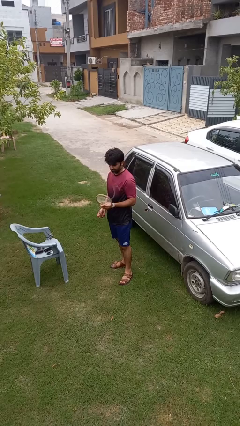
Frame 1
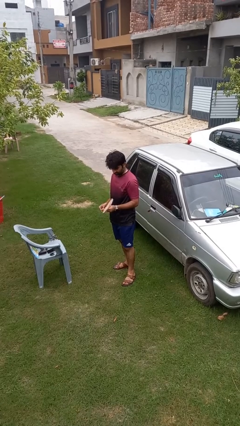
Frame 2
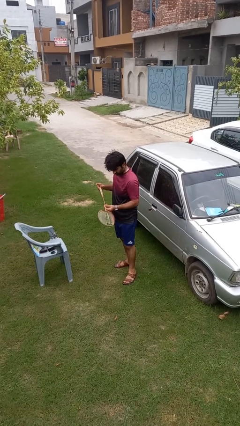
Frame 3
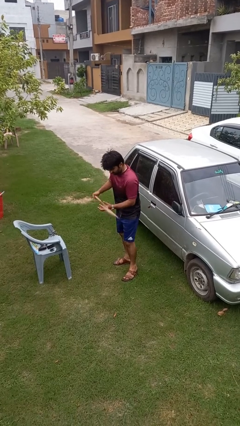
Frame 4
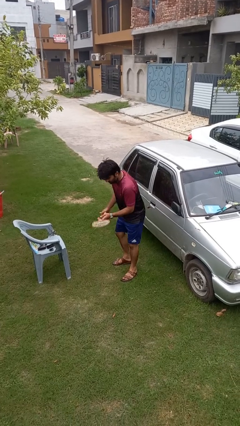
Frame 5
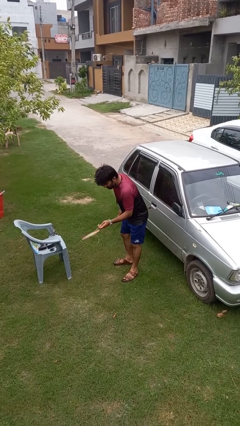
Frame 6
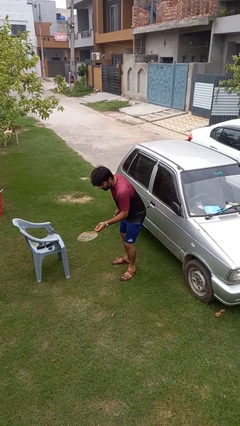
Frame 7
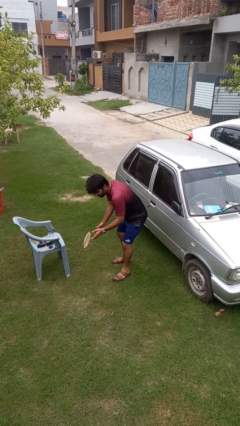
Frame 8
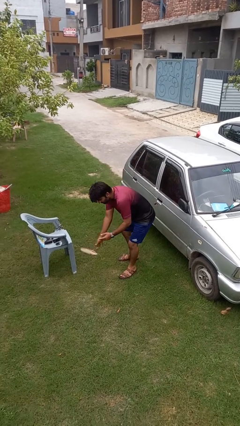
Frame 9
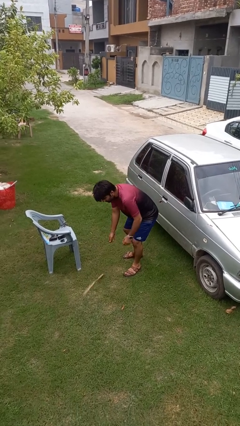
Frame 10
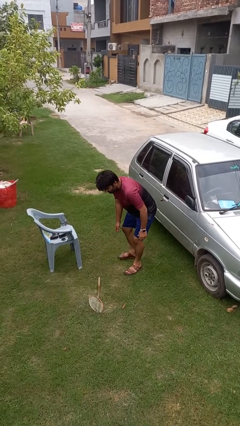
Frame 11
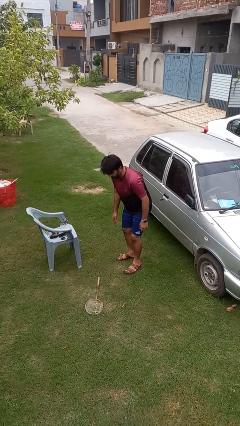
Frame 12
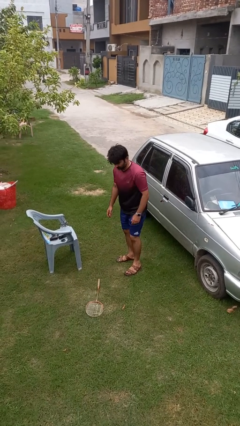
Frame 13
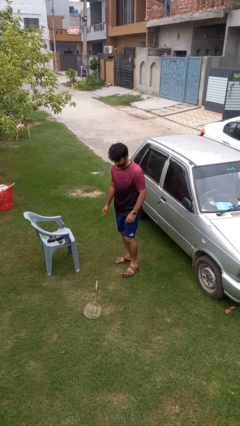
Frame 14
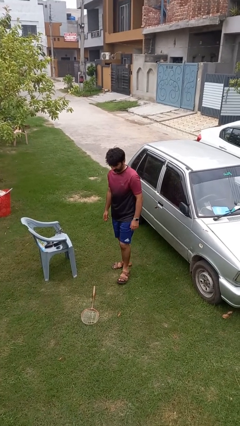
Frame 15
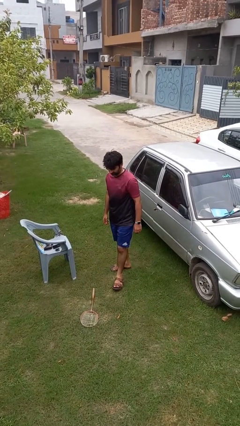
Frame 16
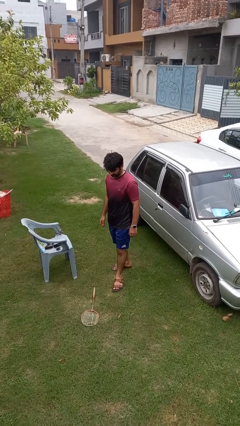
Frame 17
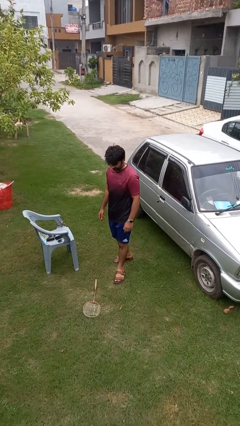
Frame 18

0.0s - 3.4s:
person drops object

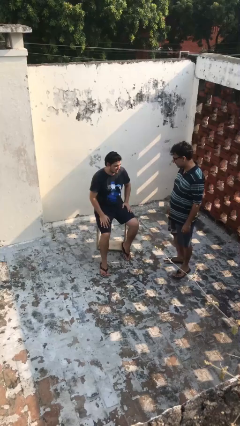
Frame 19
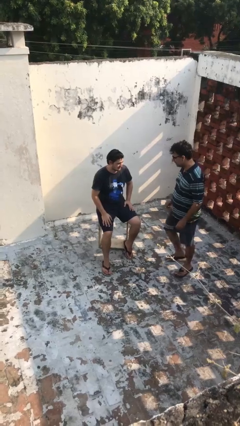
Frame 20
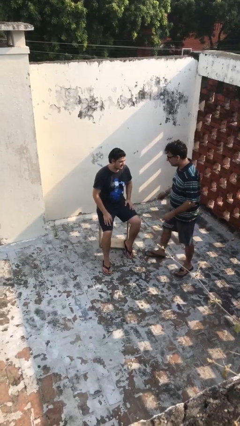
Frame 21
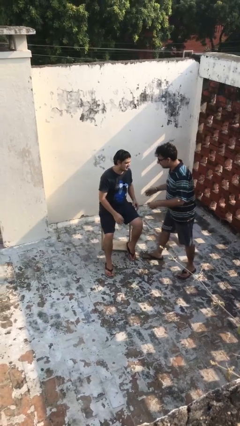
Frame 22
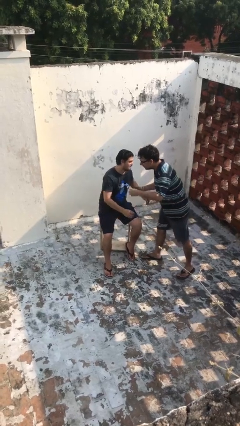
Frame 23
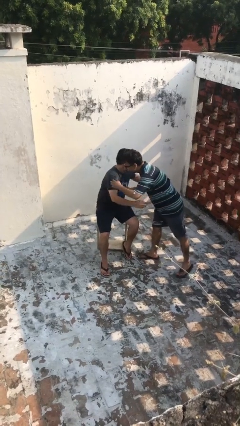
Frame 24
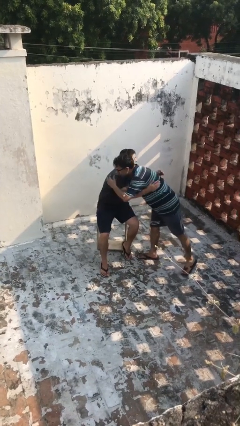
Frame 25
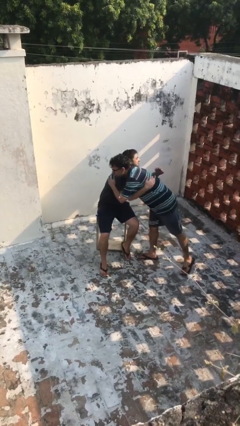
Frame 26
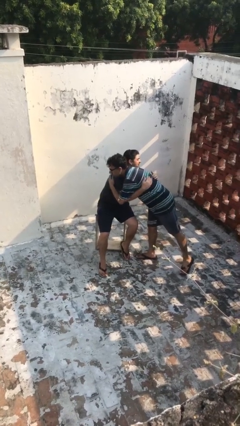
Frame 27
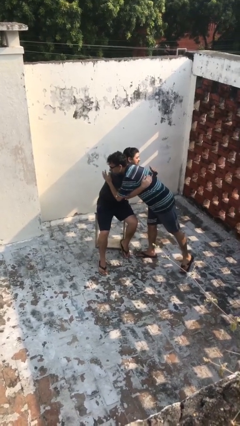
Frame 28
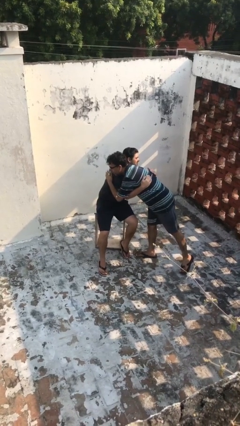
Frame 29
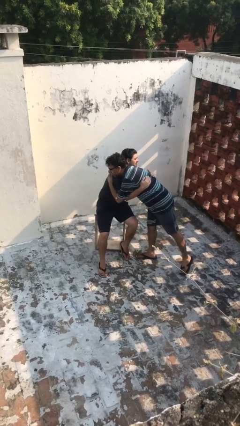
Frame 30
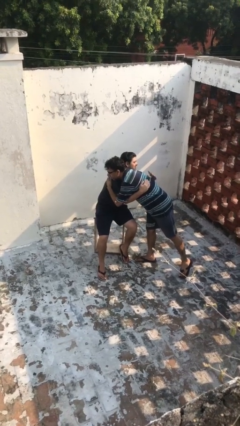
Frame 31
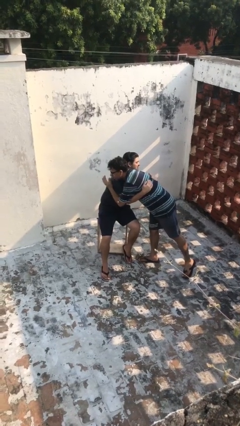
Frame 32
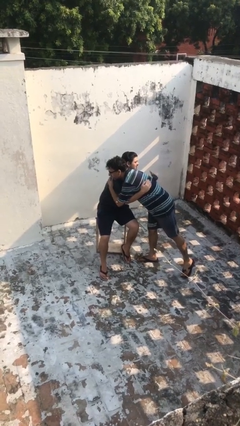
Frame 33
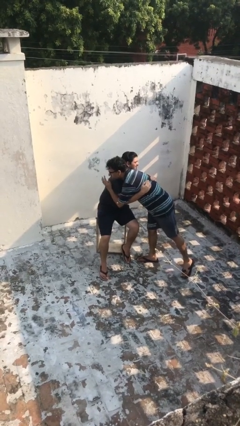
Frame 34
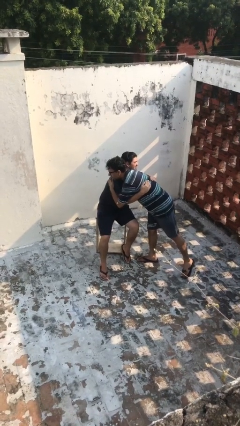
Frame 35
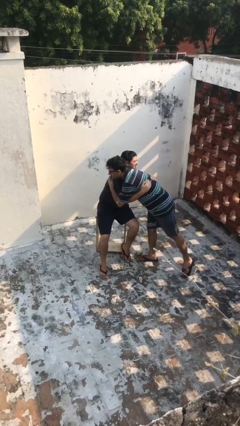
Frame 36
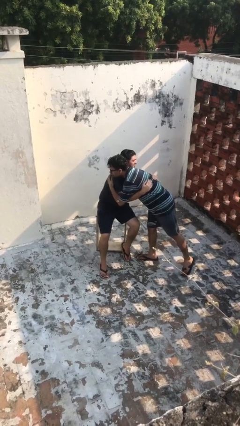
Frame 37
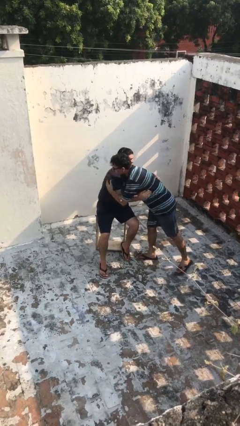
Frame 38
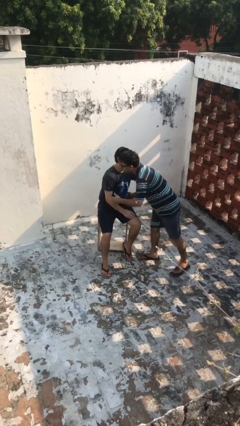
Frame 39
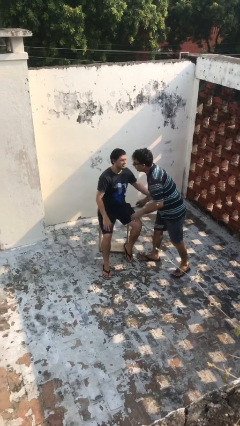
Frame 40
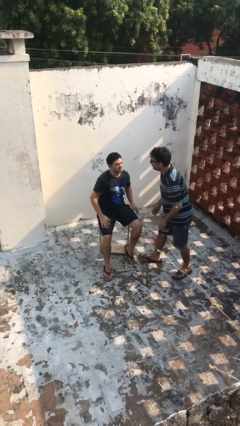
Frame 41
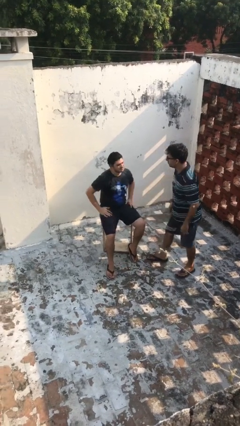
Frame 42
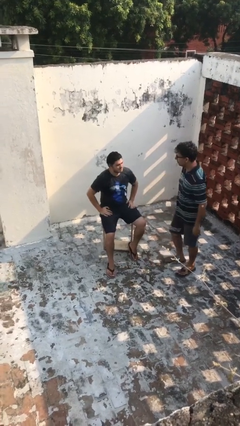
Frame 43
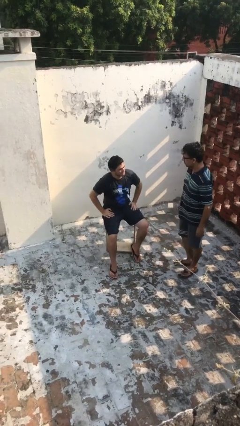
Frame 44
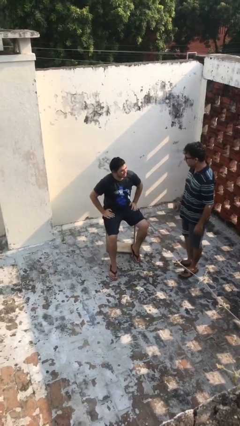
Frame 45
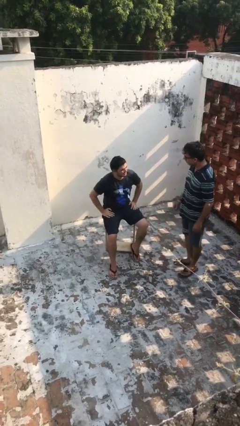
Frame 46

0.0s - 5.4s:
person embraces person

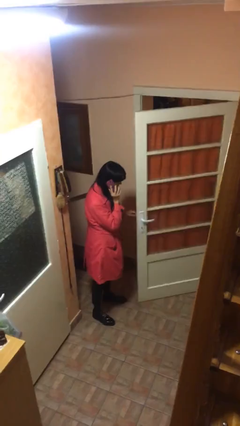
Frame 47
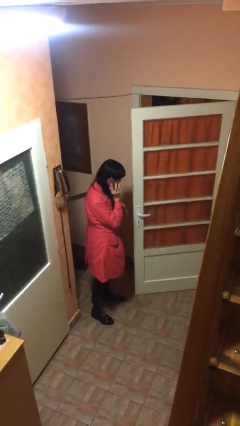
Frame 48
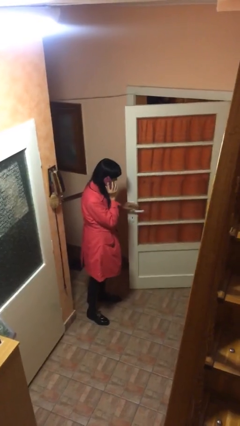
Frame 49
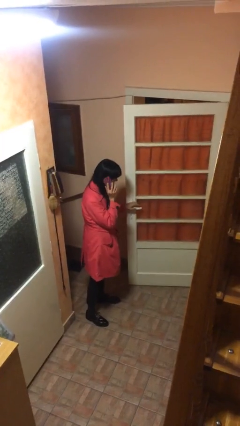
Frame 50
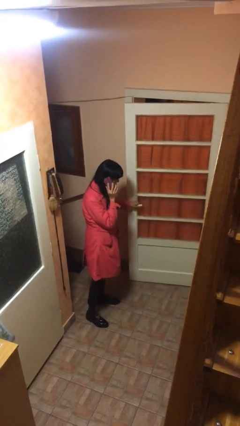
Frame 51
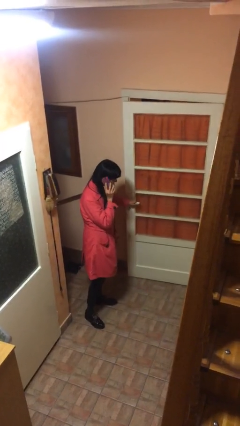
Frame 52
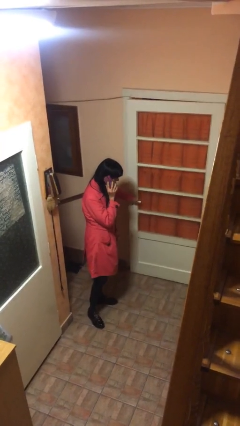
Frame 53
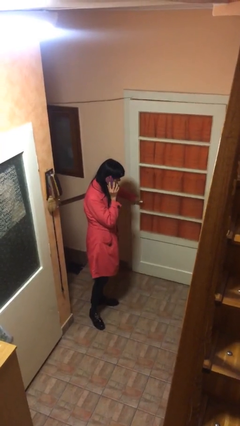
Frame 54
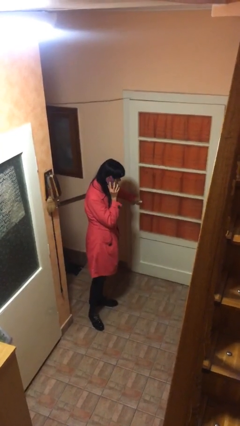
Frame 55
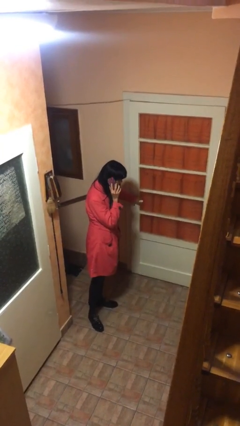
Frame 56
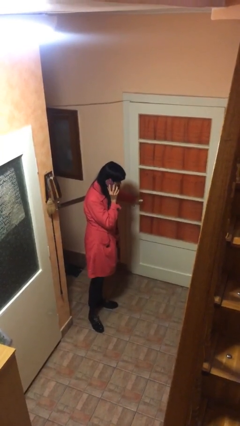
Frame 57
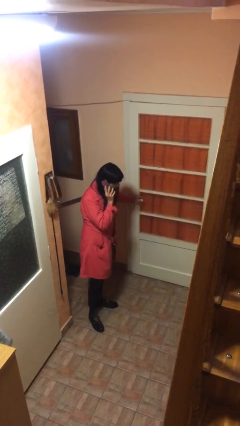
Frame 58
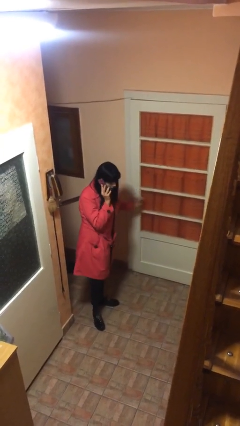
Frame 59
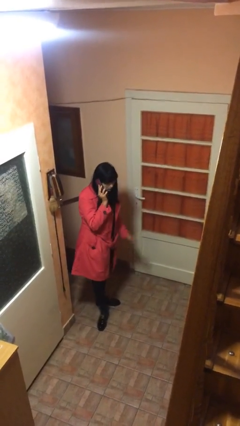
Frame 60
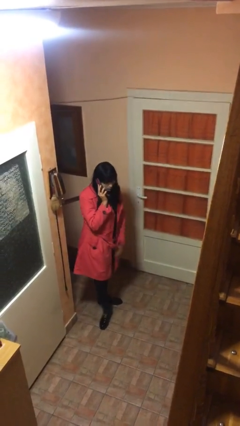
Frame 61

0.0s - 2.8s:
person closes facility door

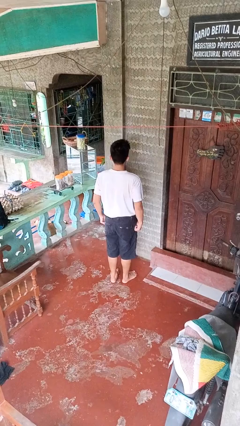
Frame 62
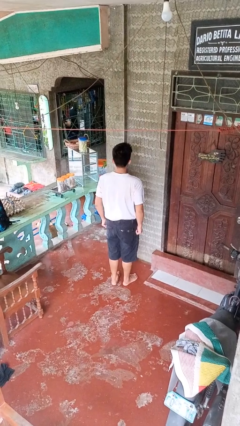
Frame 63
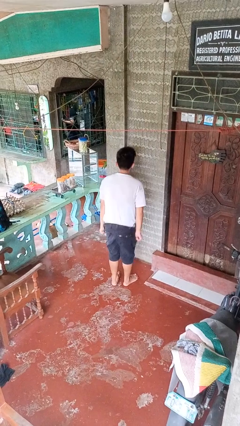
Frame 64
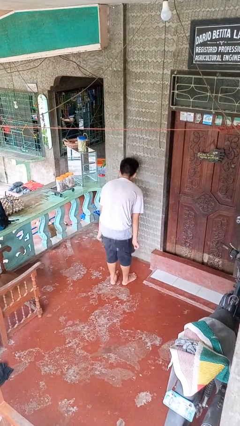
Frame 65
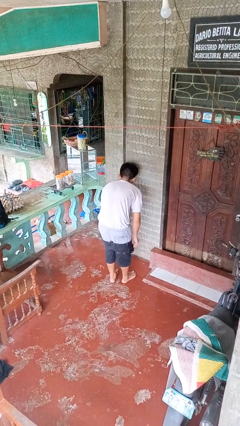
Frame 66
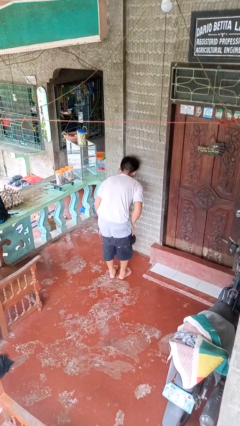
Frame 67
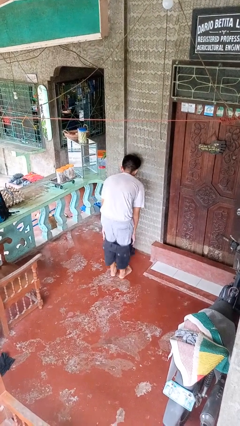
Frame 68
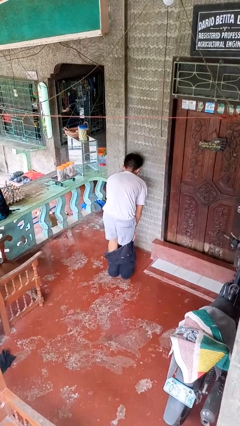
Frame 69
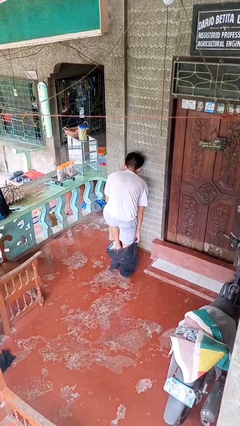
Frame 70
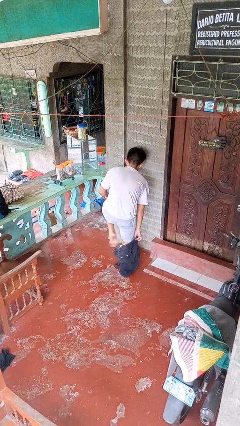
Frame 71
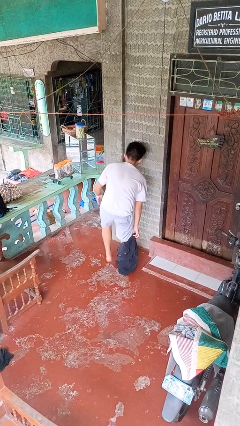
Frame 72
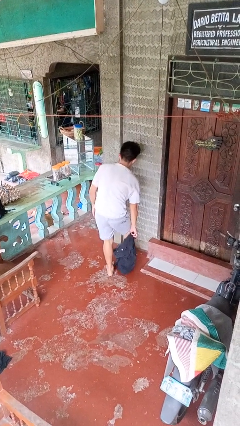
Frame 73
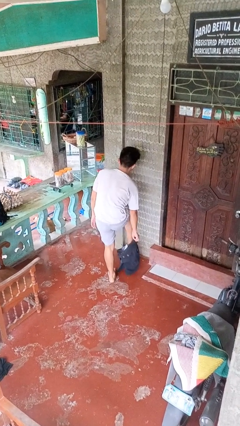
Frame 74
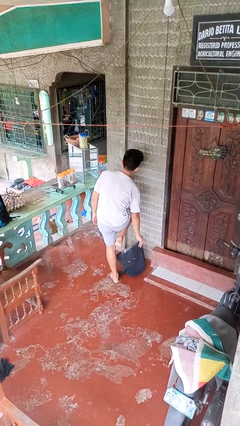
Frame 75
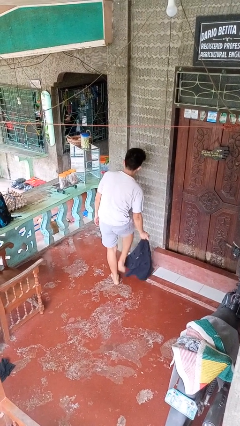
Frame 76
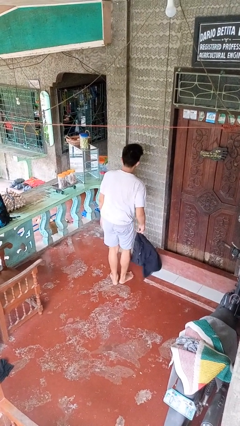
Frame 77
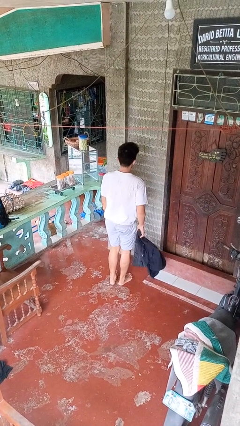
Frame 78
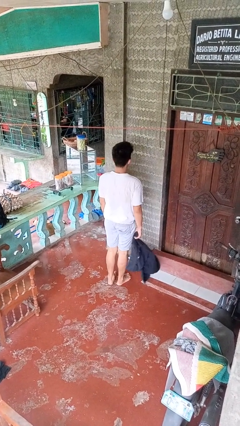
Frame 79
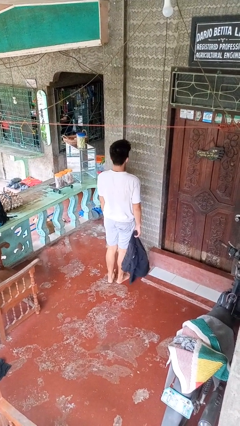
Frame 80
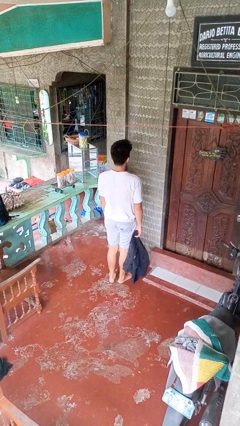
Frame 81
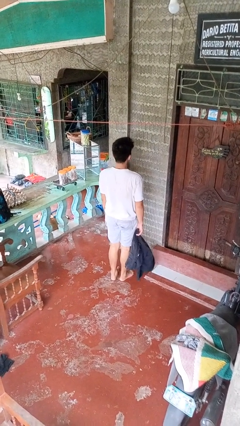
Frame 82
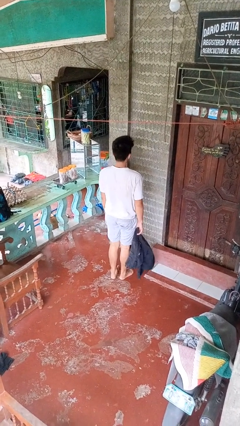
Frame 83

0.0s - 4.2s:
person takes off pants

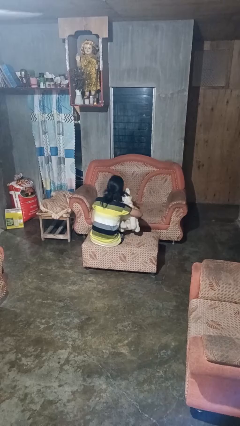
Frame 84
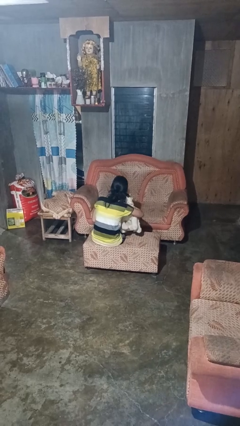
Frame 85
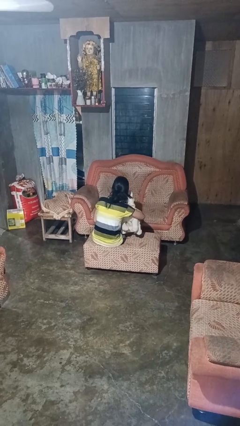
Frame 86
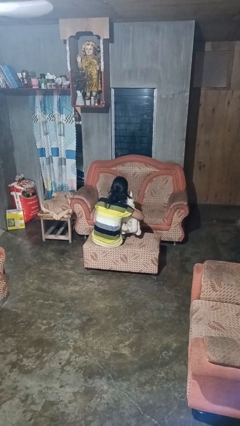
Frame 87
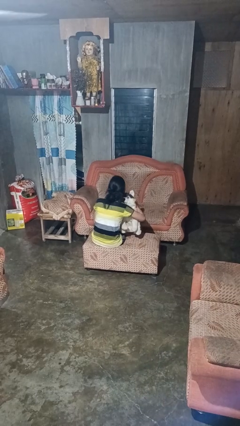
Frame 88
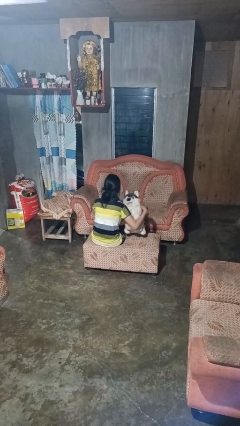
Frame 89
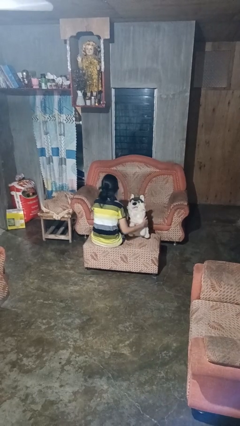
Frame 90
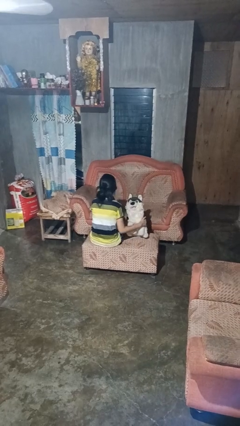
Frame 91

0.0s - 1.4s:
person hugs stuffed animal

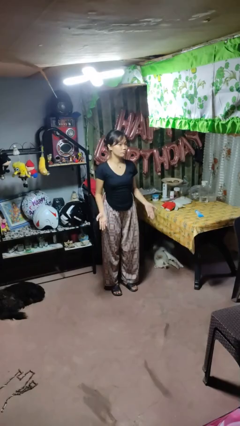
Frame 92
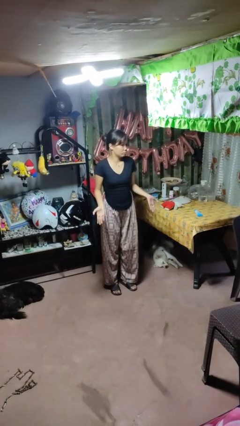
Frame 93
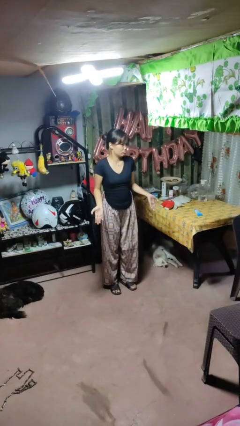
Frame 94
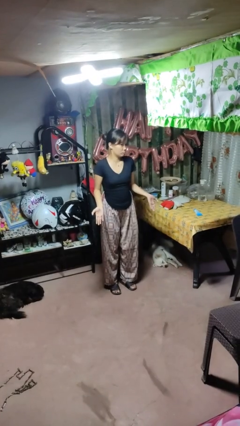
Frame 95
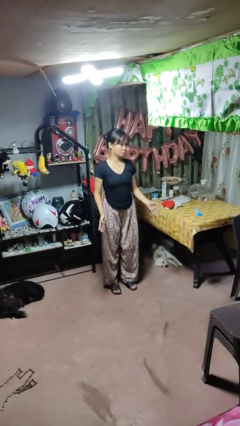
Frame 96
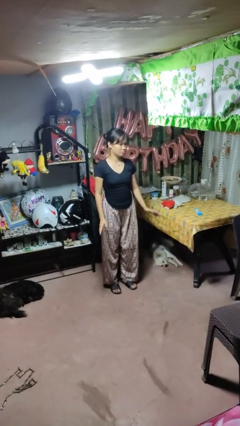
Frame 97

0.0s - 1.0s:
person shrugs
